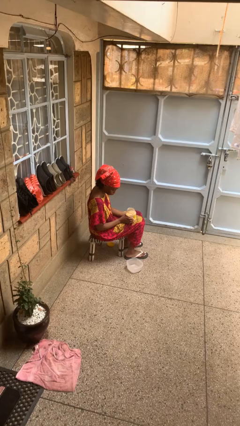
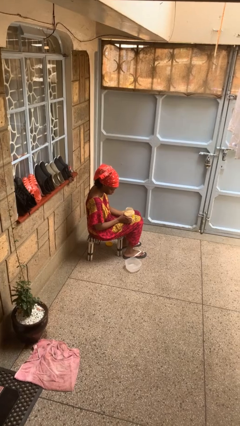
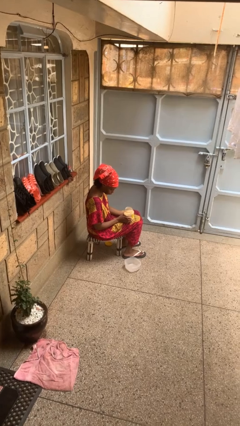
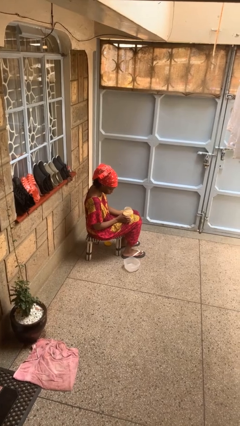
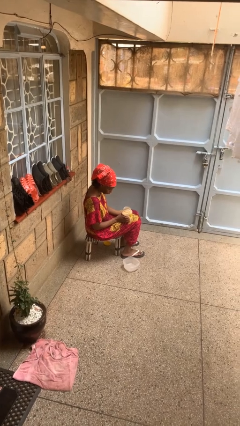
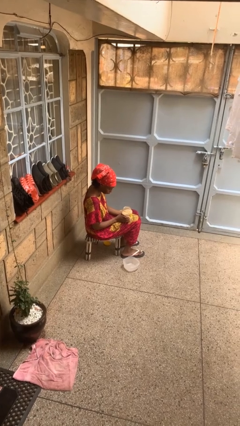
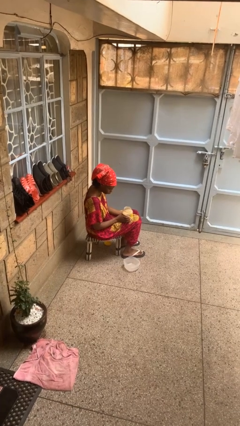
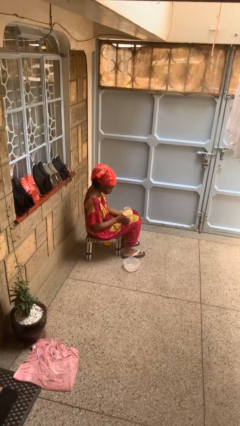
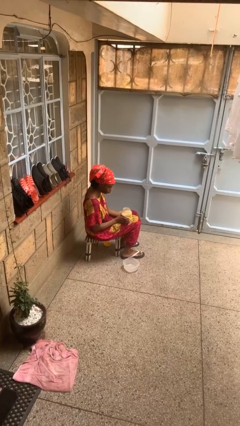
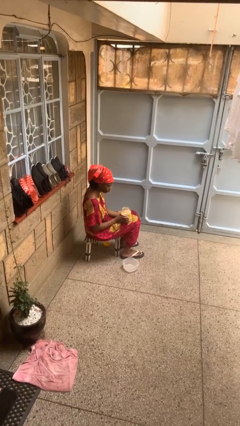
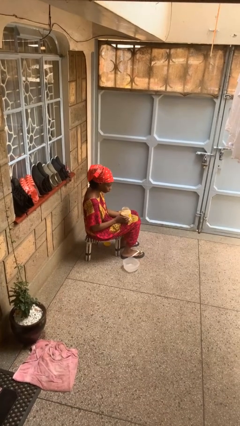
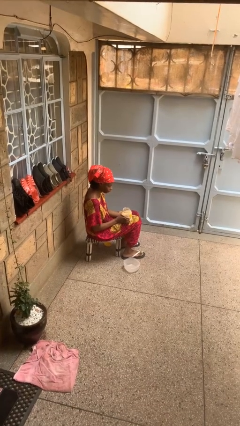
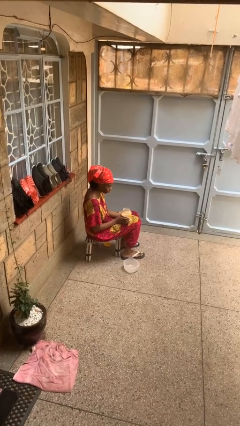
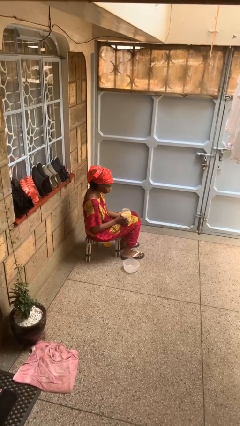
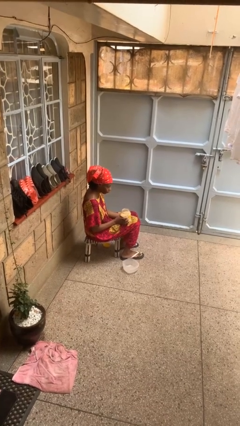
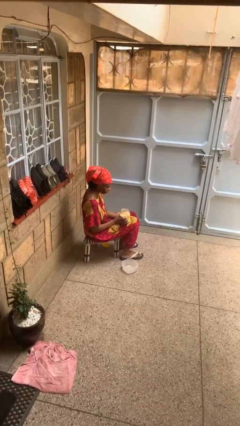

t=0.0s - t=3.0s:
person pours into bowl

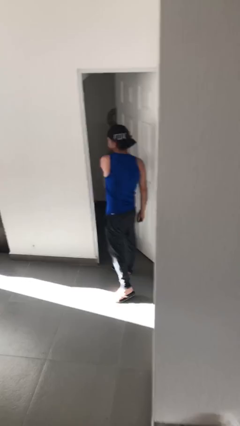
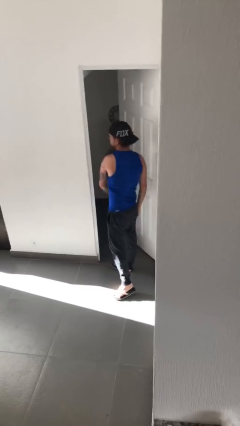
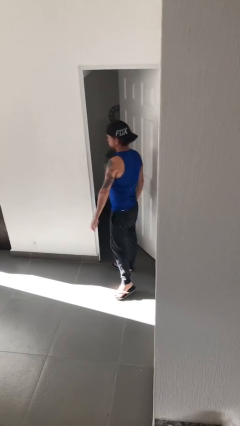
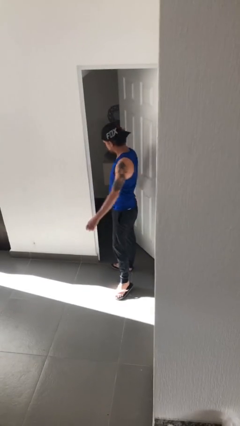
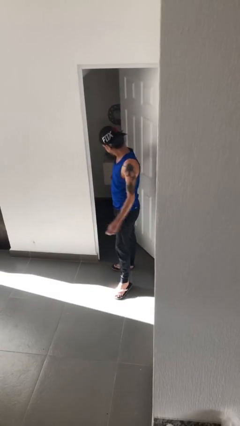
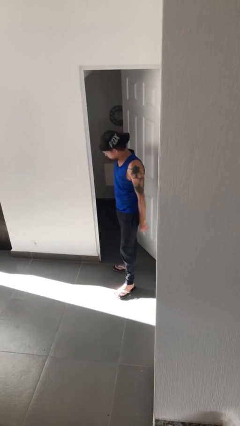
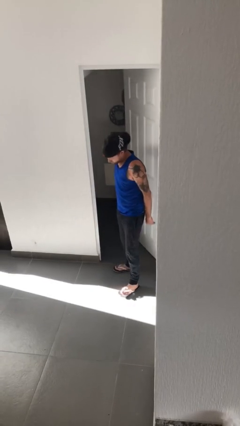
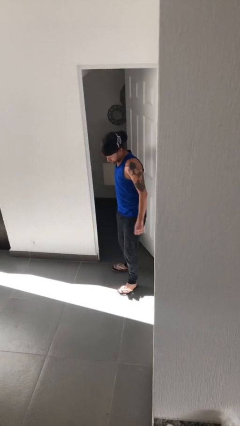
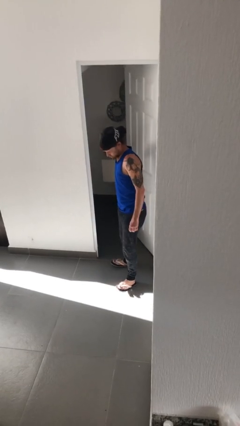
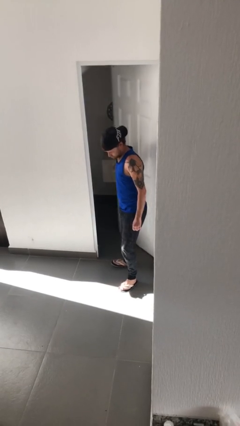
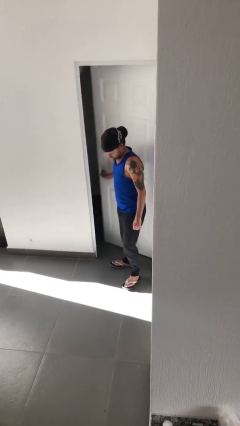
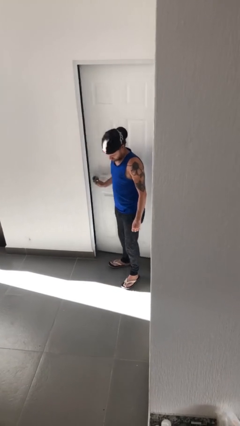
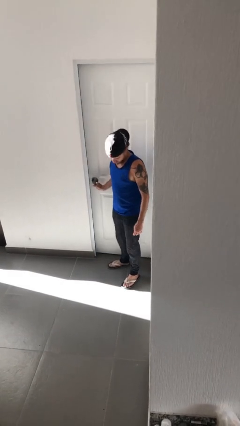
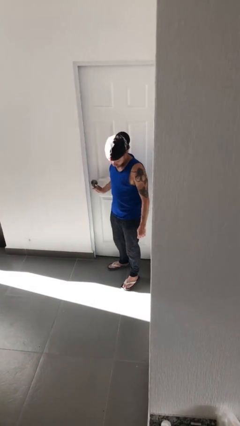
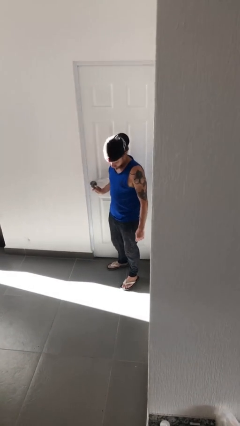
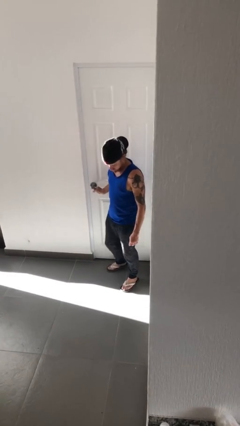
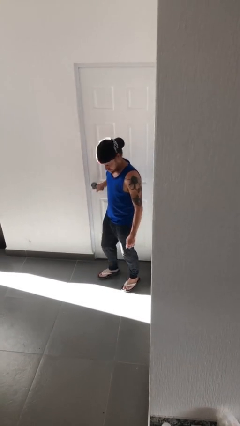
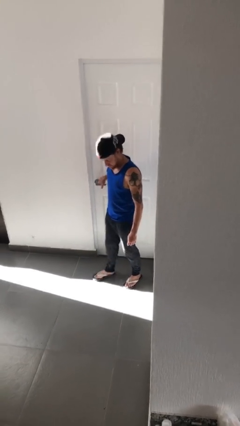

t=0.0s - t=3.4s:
person closes facility door

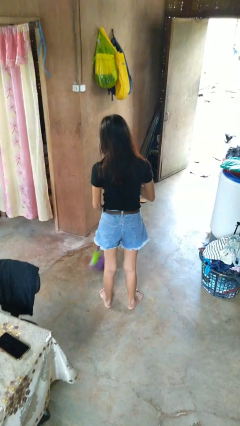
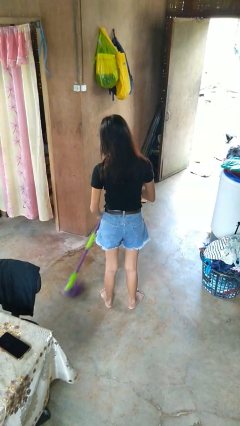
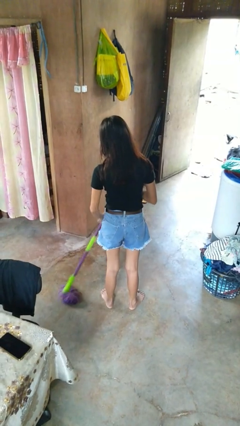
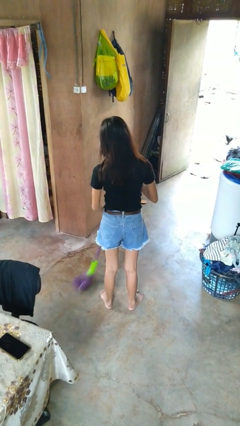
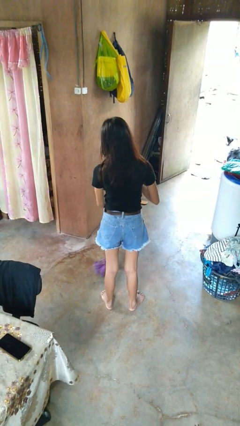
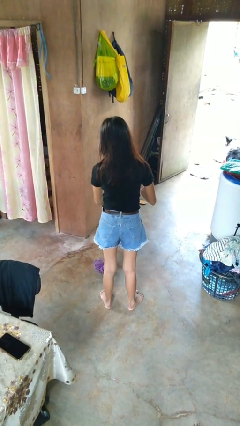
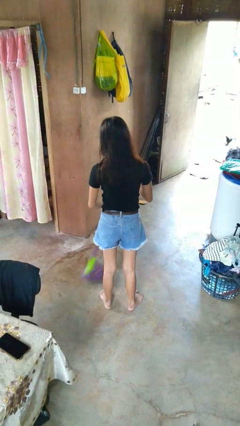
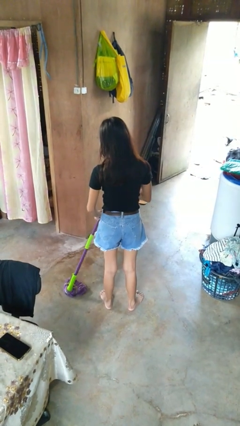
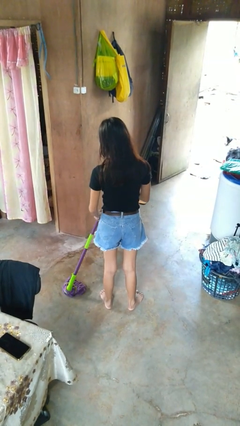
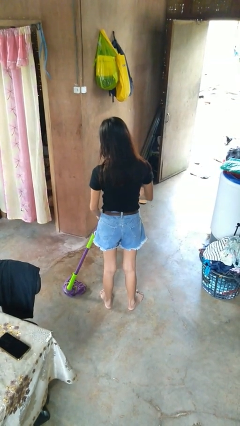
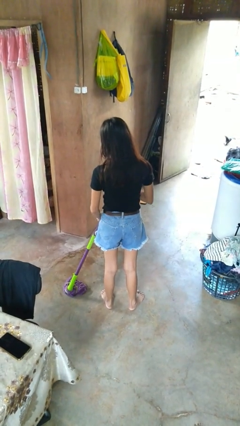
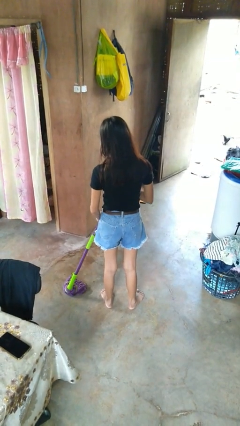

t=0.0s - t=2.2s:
person mops

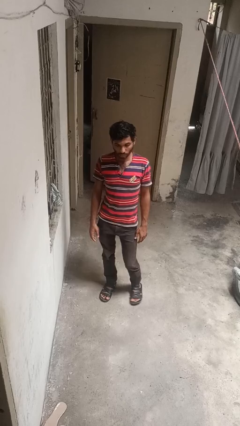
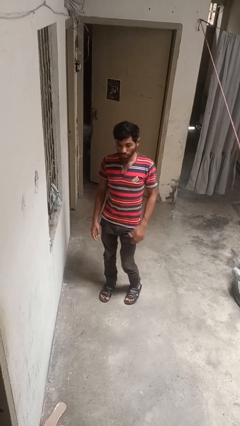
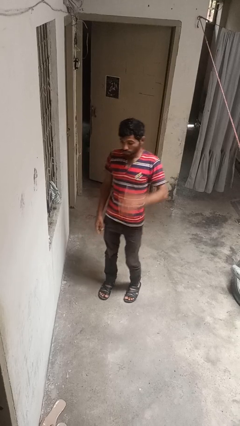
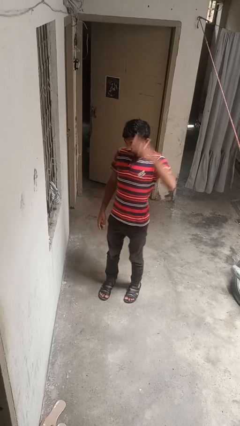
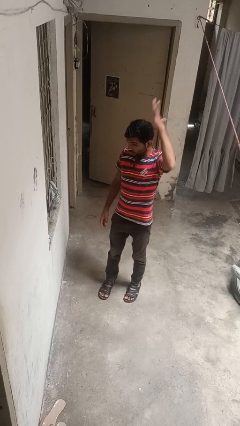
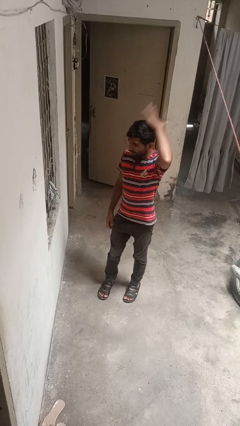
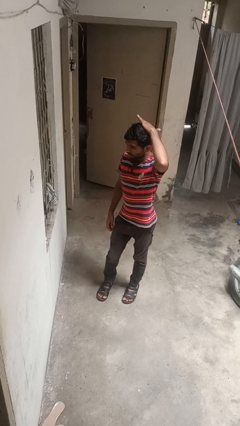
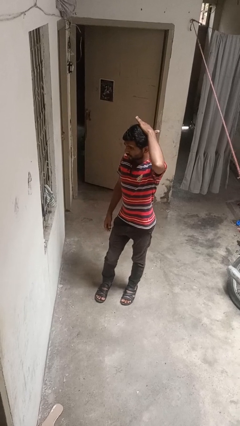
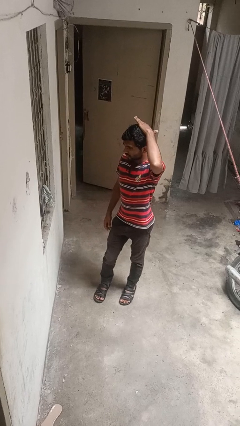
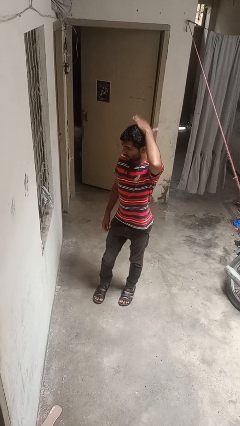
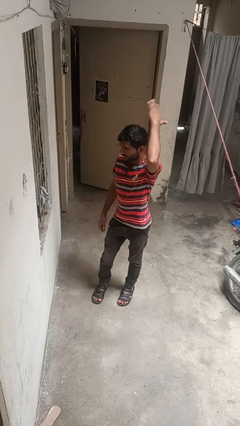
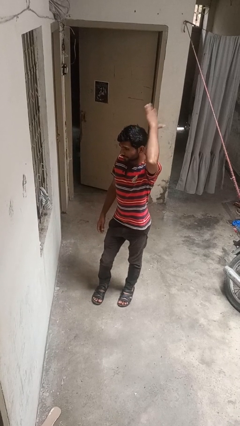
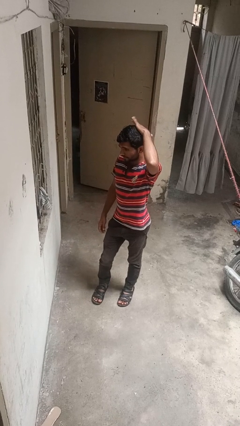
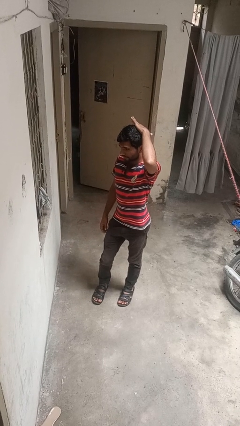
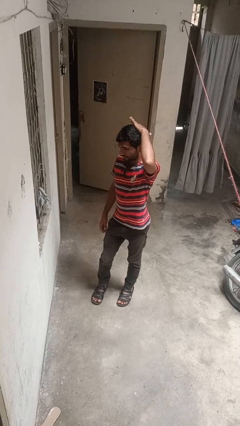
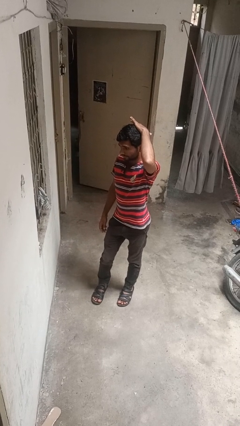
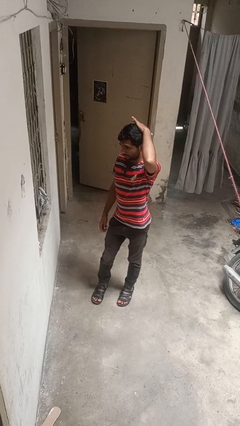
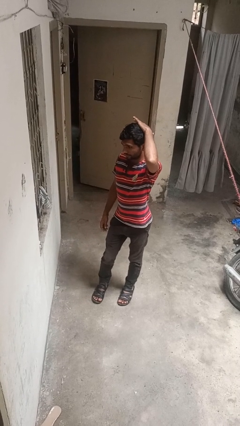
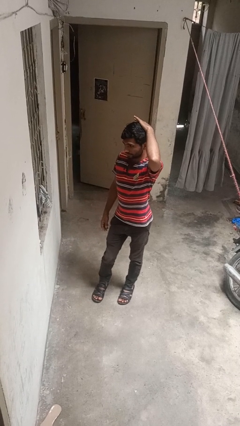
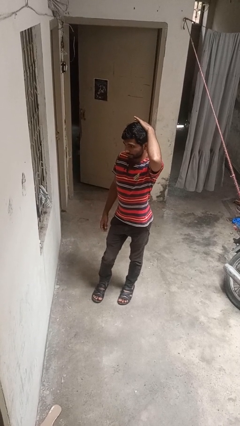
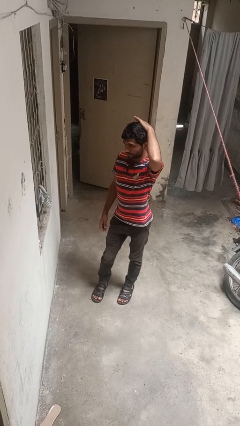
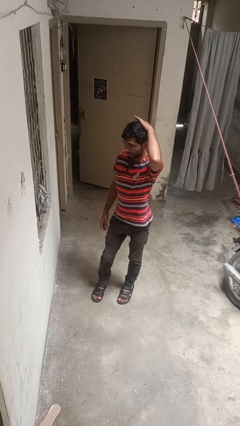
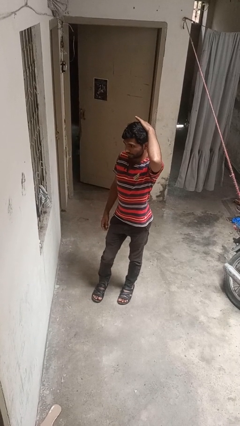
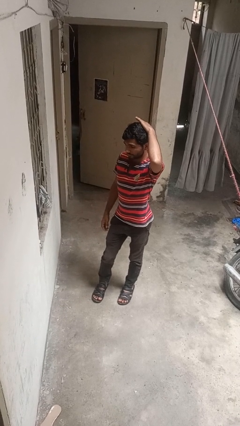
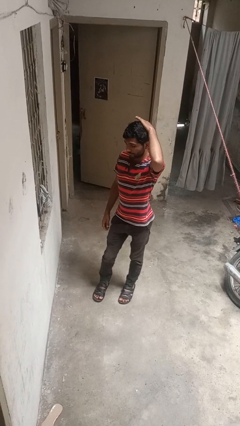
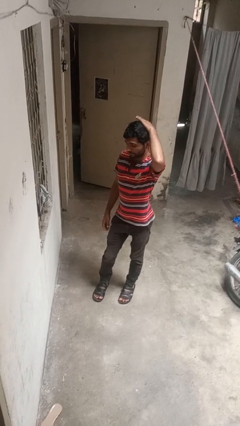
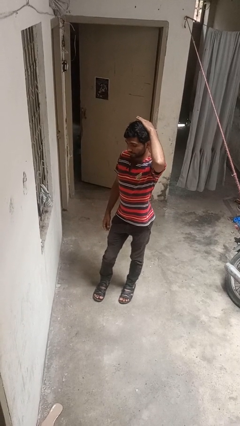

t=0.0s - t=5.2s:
person pats head

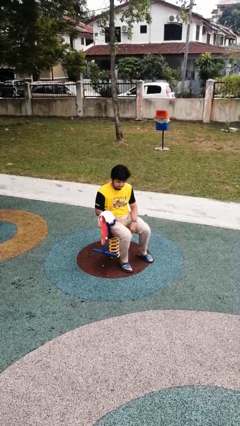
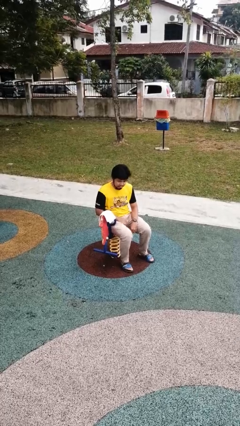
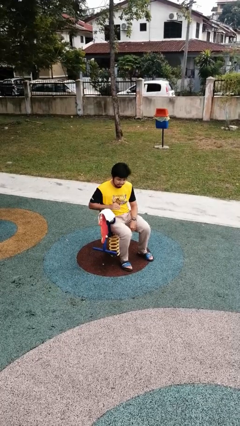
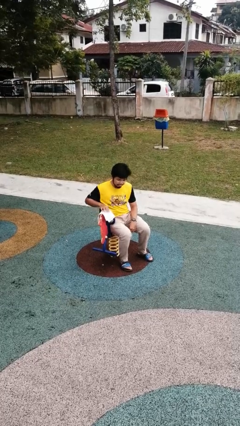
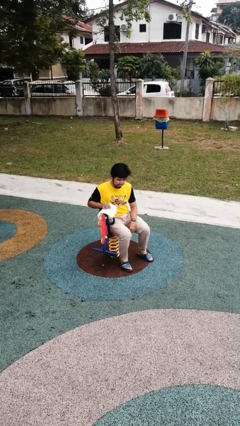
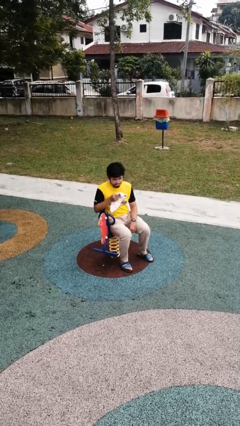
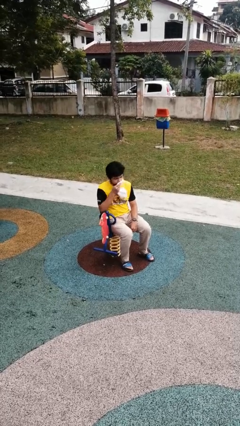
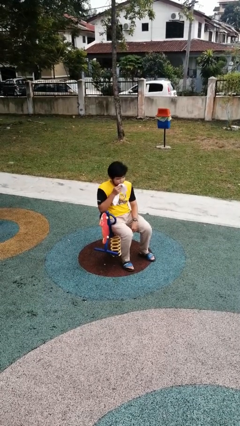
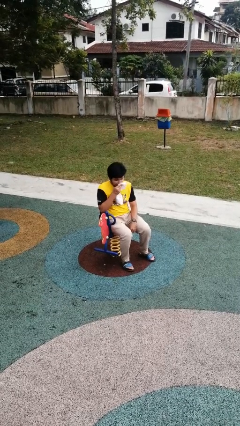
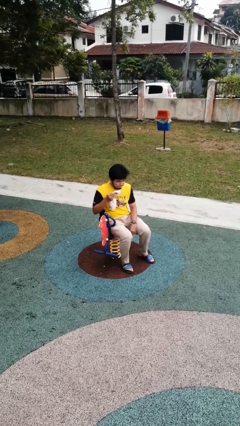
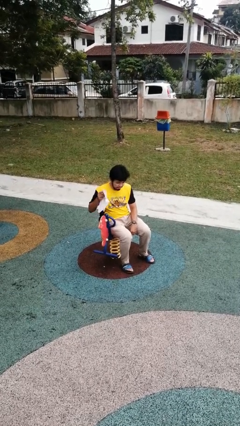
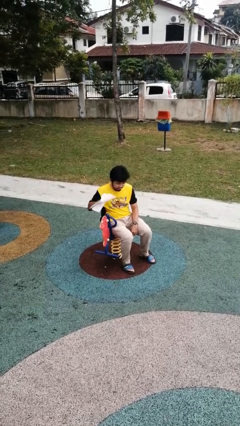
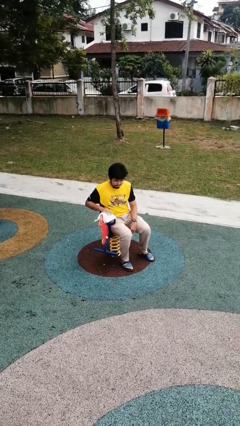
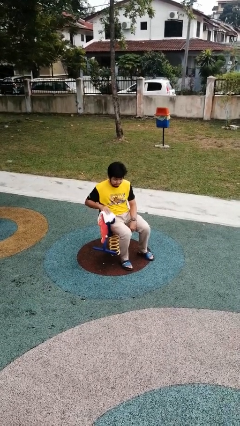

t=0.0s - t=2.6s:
person wipes mouth with napkin

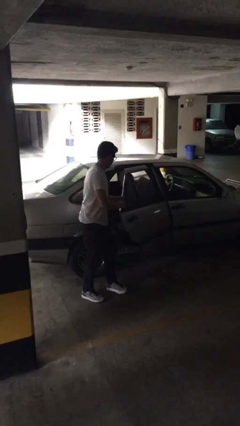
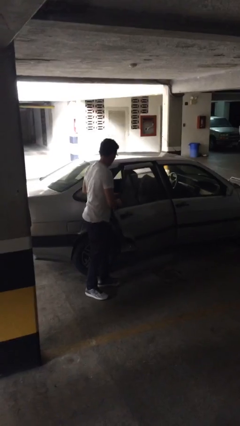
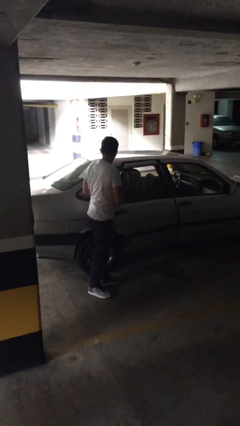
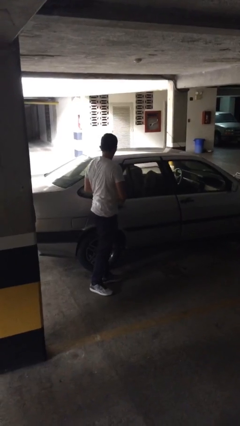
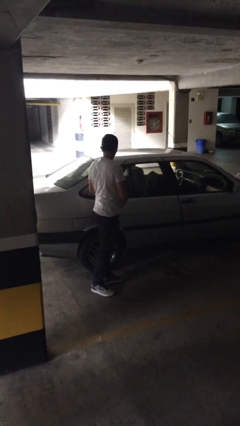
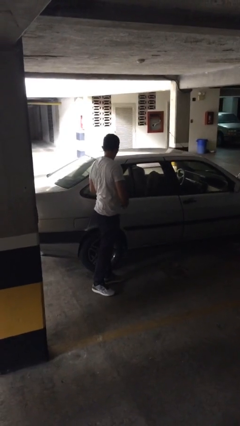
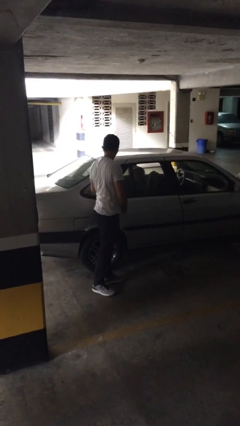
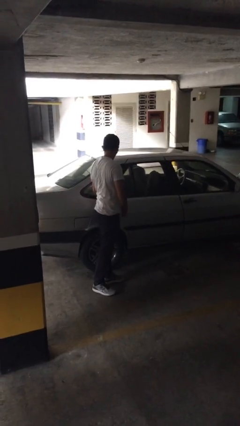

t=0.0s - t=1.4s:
person closes car door
